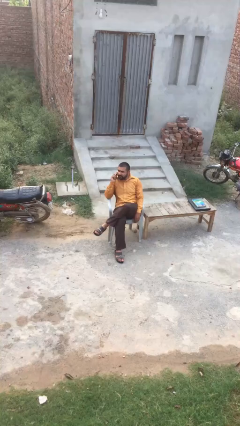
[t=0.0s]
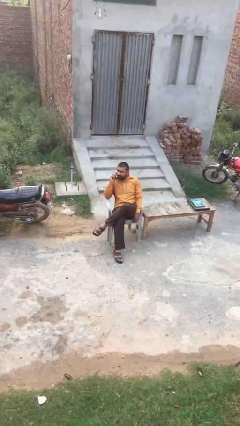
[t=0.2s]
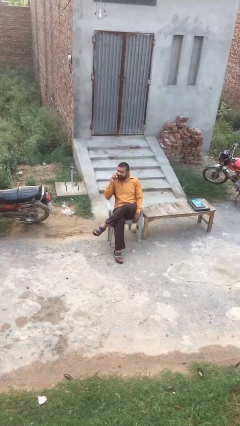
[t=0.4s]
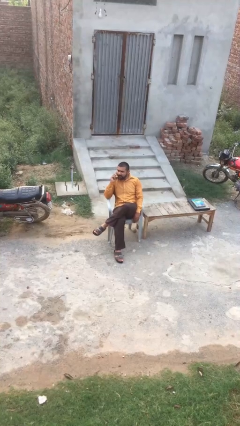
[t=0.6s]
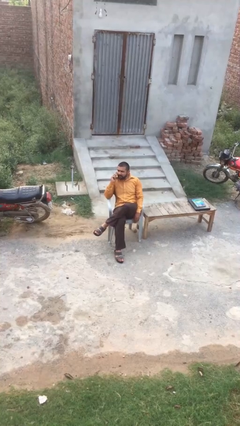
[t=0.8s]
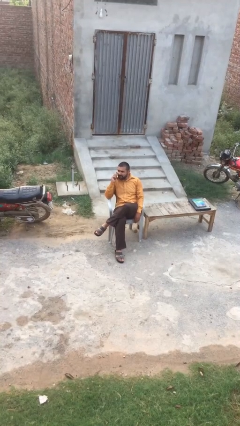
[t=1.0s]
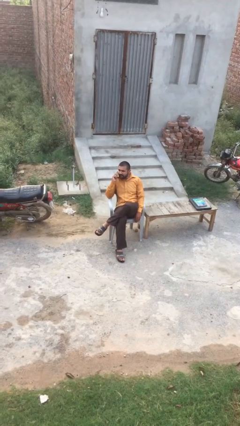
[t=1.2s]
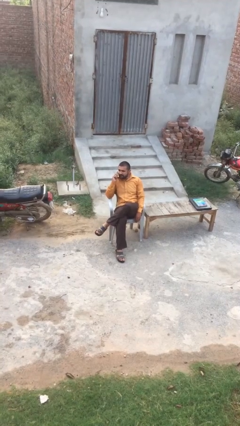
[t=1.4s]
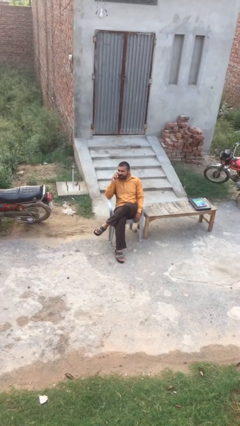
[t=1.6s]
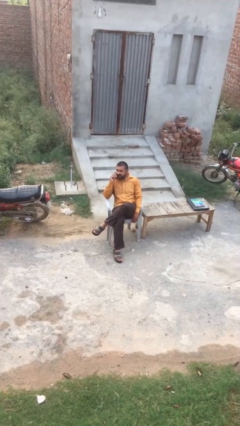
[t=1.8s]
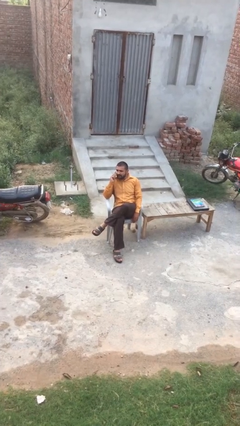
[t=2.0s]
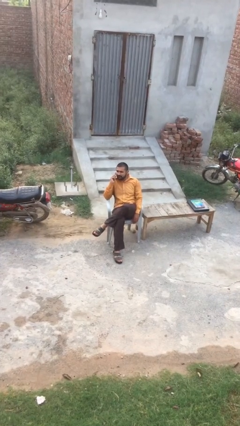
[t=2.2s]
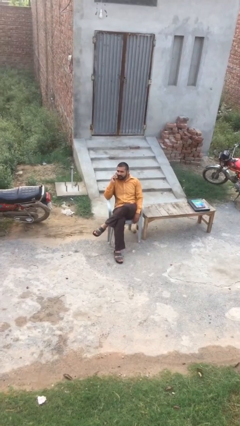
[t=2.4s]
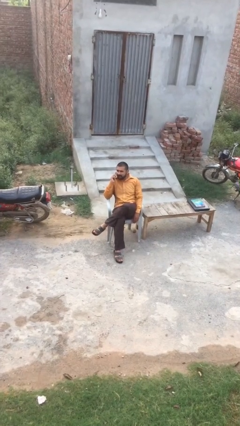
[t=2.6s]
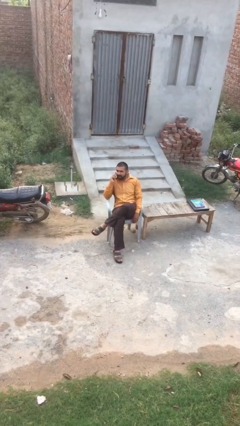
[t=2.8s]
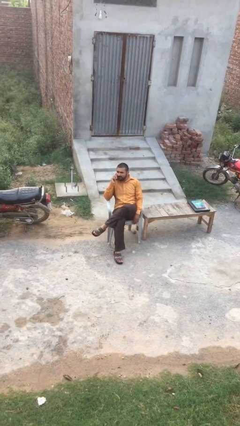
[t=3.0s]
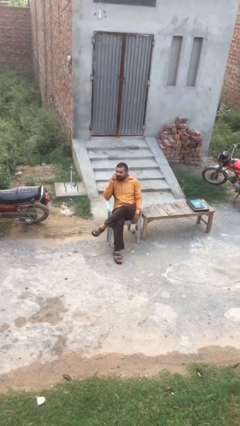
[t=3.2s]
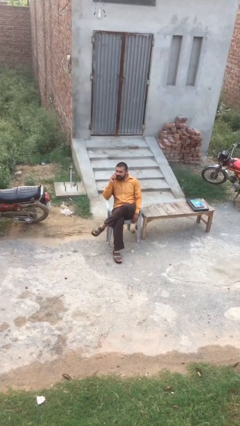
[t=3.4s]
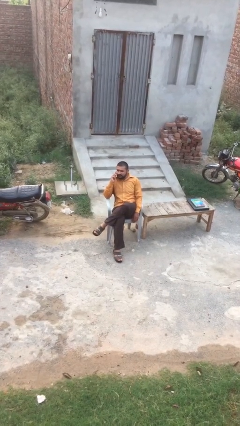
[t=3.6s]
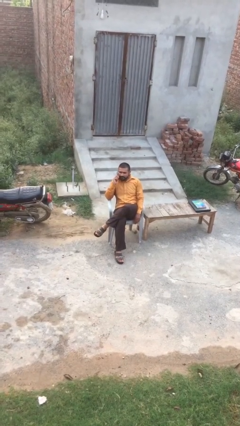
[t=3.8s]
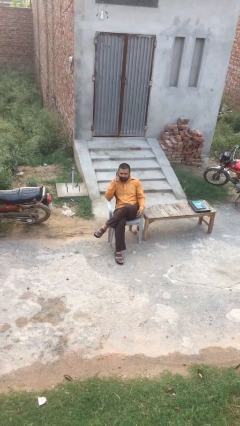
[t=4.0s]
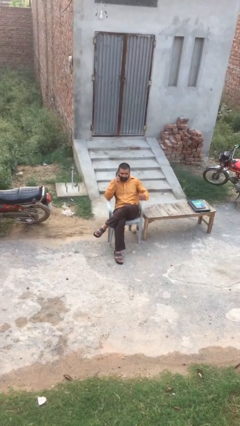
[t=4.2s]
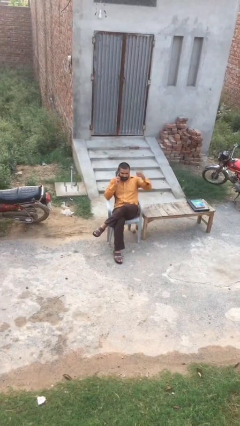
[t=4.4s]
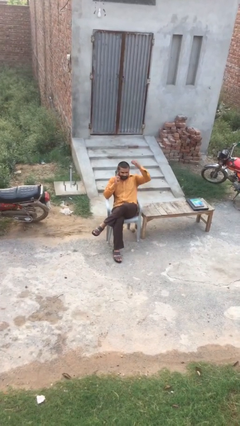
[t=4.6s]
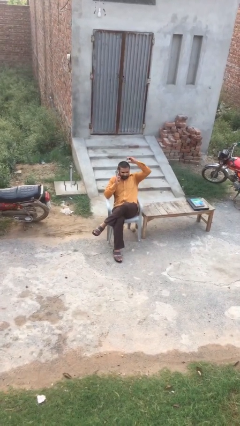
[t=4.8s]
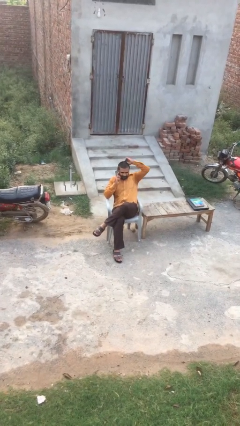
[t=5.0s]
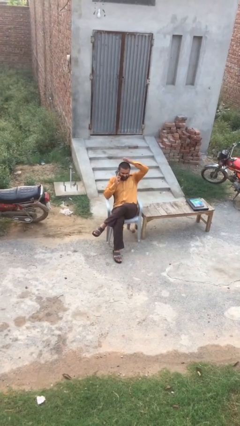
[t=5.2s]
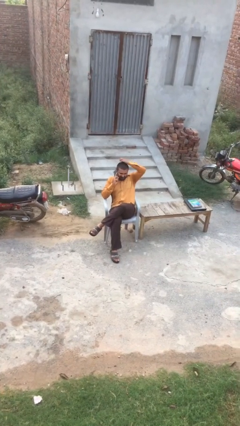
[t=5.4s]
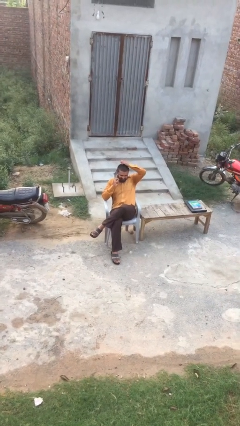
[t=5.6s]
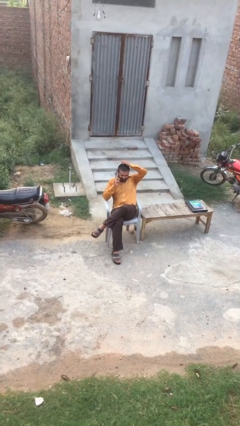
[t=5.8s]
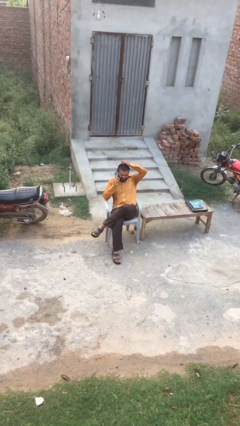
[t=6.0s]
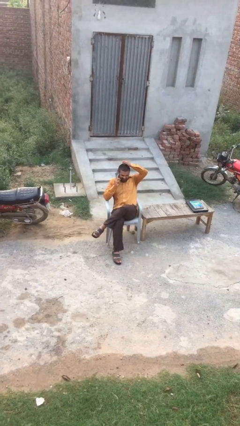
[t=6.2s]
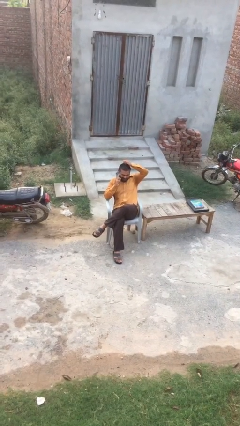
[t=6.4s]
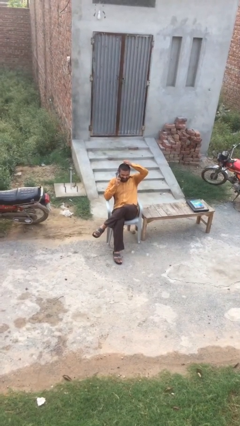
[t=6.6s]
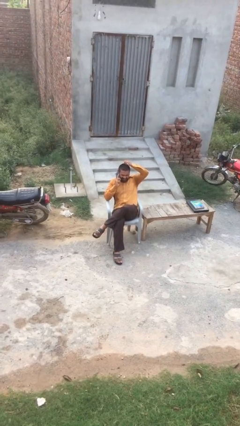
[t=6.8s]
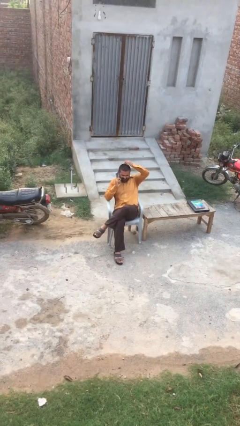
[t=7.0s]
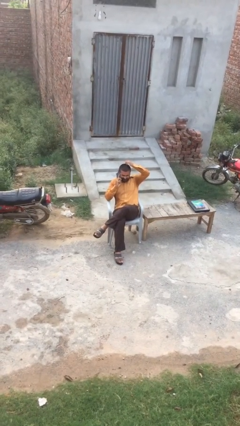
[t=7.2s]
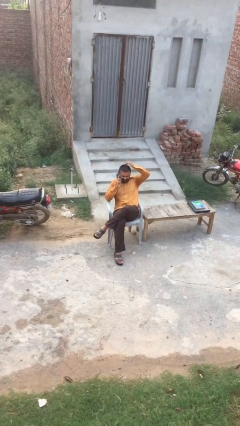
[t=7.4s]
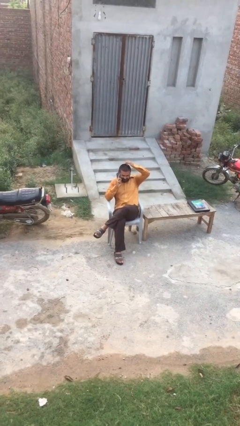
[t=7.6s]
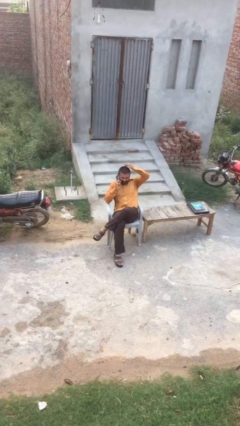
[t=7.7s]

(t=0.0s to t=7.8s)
person talks on phone

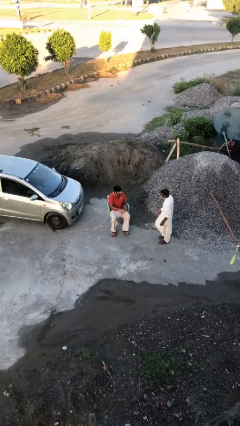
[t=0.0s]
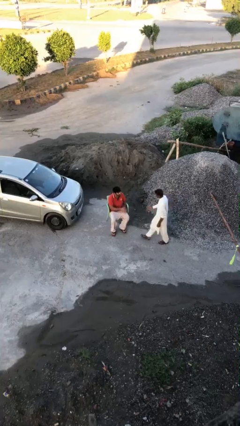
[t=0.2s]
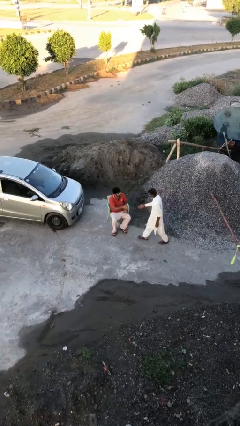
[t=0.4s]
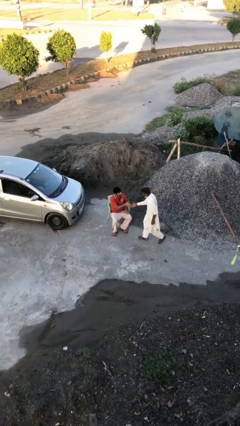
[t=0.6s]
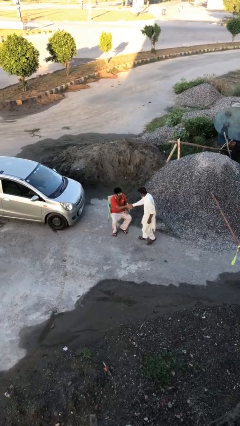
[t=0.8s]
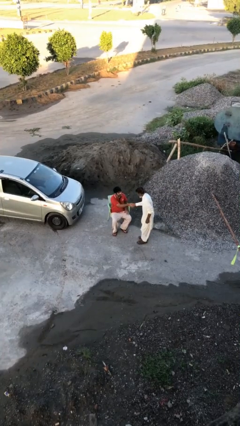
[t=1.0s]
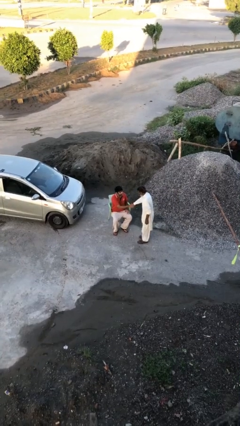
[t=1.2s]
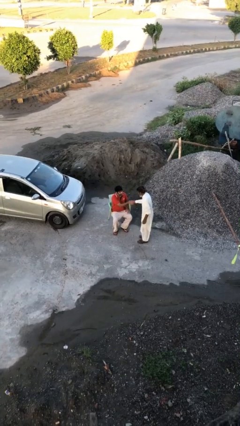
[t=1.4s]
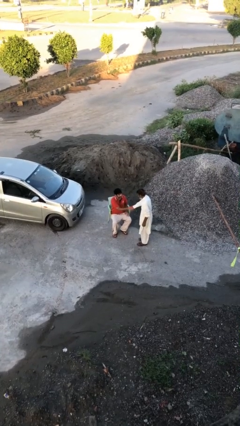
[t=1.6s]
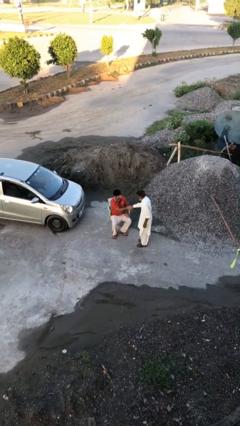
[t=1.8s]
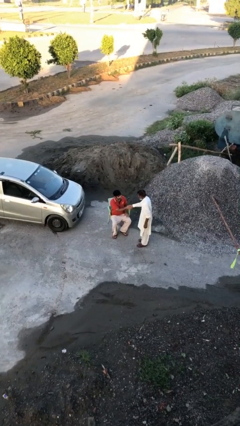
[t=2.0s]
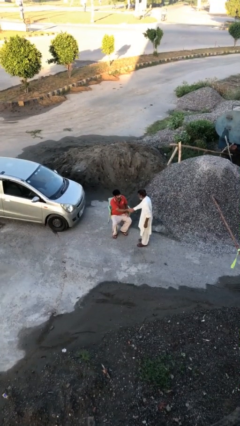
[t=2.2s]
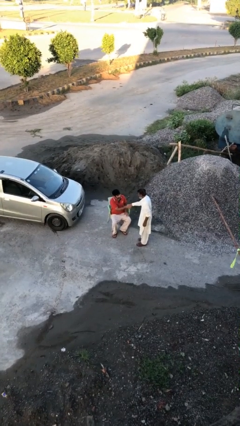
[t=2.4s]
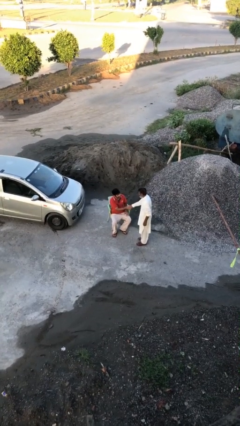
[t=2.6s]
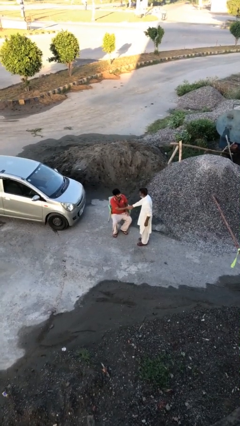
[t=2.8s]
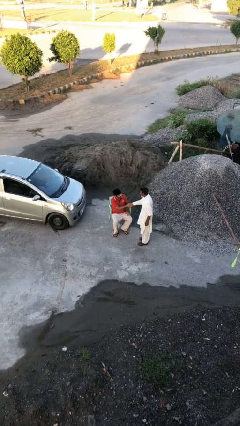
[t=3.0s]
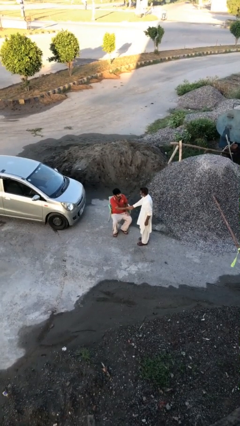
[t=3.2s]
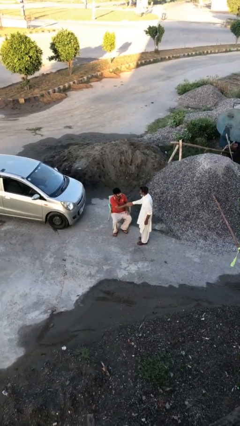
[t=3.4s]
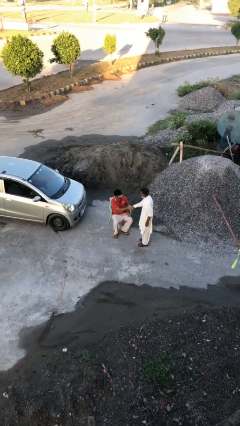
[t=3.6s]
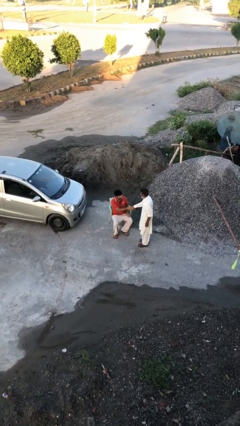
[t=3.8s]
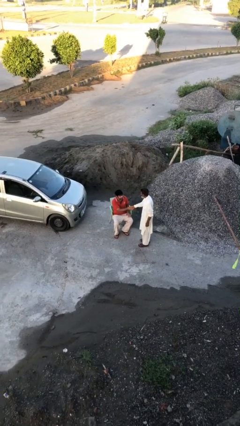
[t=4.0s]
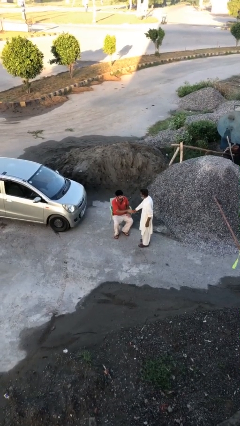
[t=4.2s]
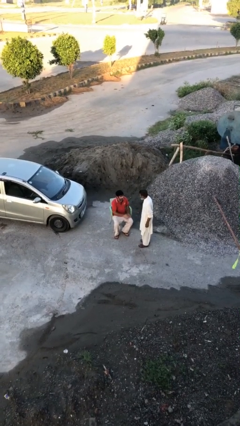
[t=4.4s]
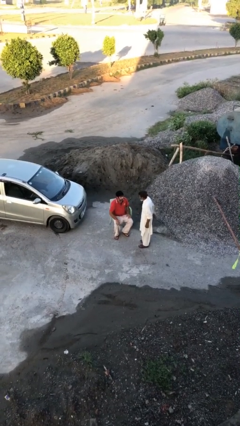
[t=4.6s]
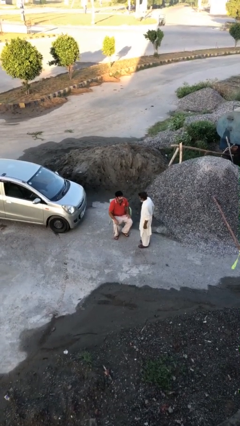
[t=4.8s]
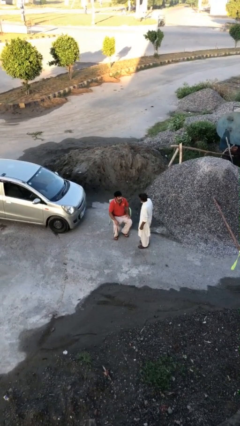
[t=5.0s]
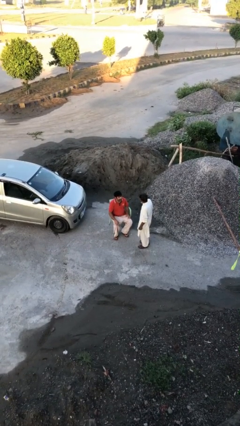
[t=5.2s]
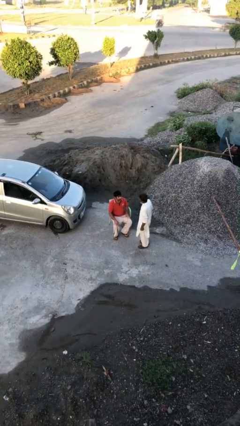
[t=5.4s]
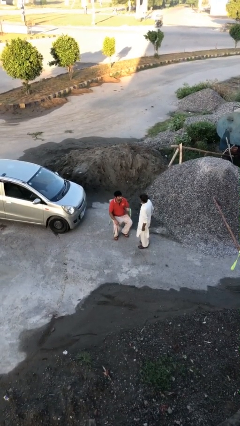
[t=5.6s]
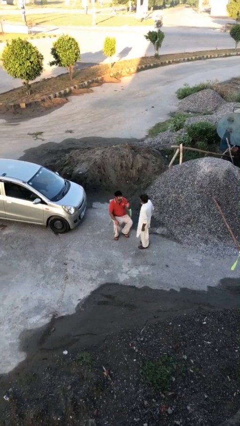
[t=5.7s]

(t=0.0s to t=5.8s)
person shakes hand

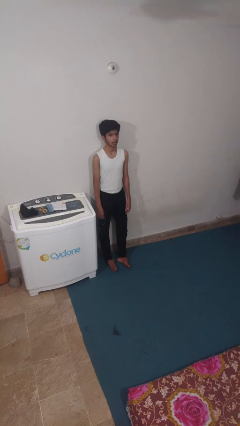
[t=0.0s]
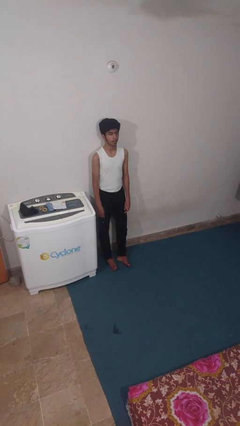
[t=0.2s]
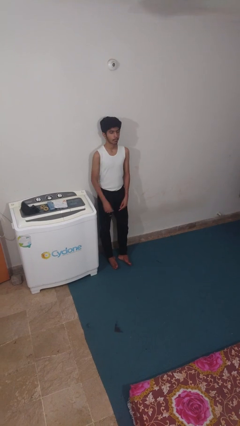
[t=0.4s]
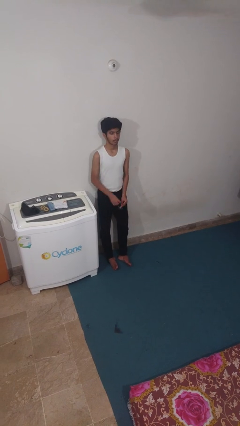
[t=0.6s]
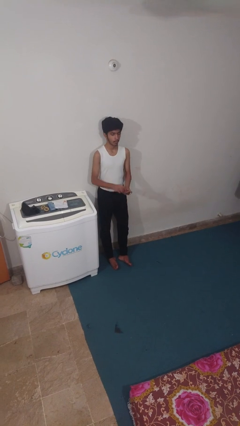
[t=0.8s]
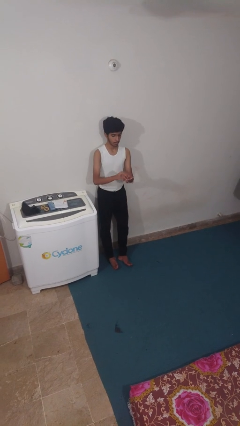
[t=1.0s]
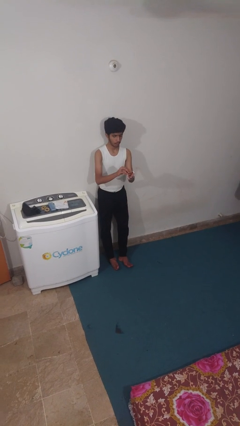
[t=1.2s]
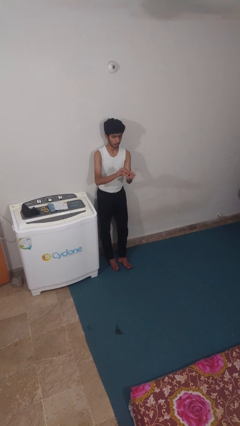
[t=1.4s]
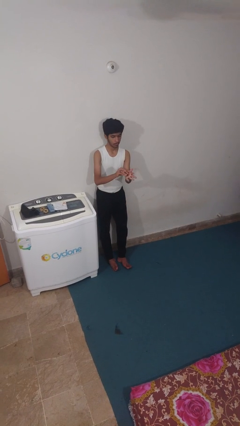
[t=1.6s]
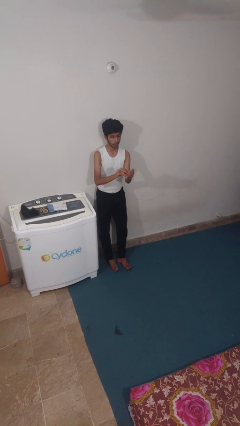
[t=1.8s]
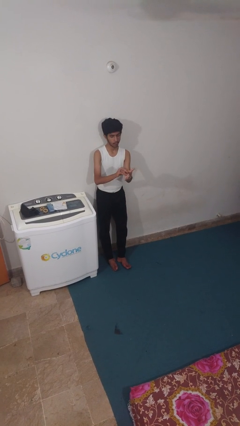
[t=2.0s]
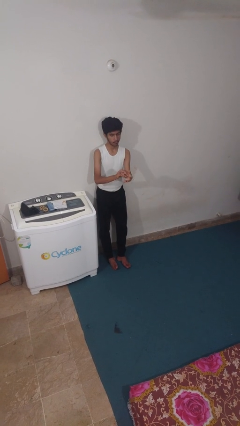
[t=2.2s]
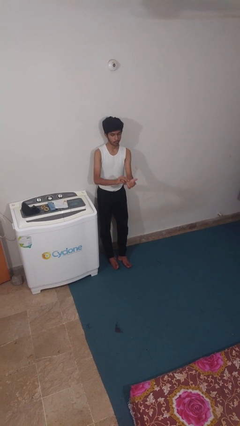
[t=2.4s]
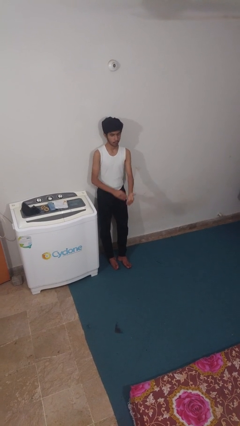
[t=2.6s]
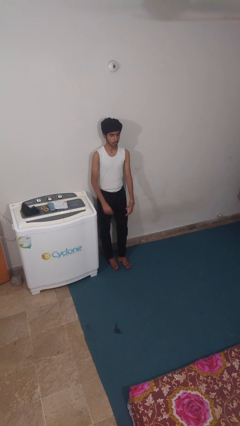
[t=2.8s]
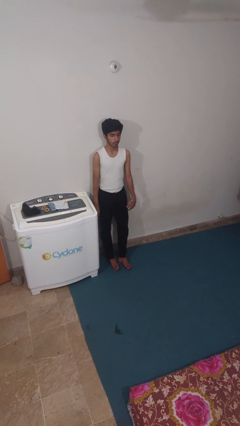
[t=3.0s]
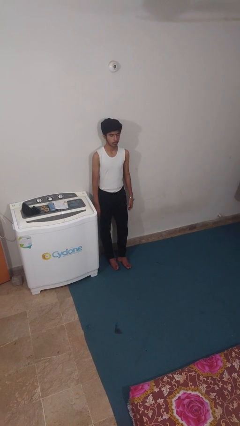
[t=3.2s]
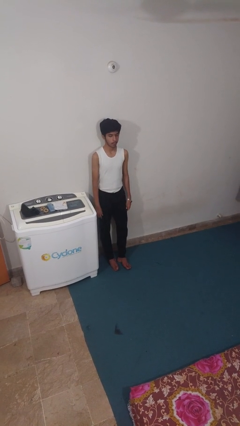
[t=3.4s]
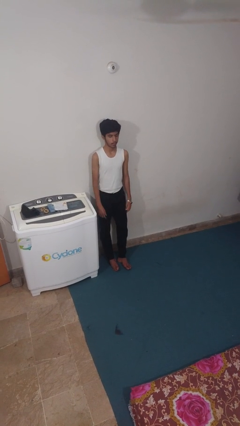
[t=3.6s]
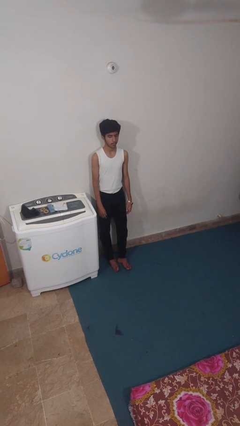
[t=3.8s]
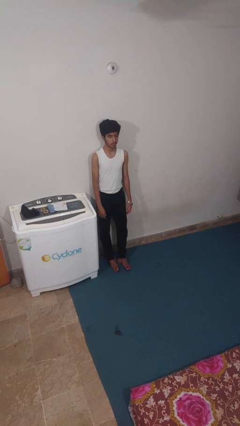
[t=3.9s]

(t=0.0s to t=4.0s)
person puts on wristwatch

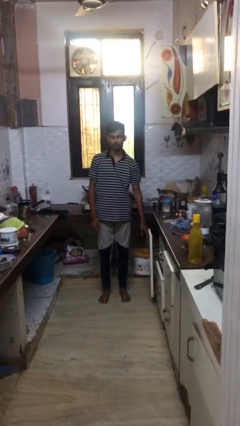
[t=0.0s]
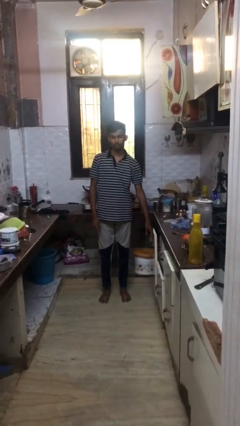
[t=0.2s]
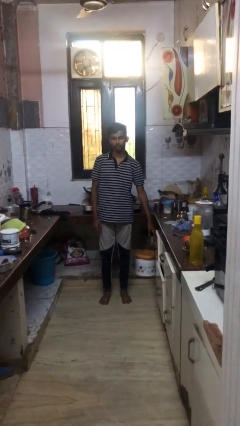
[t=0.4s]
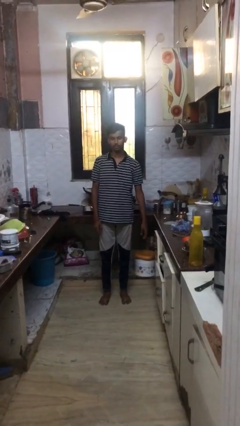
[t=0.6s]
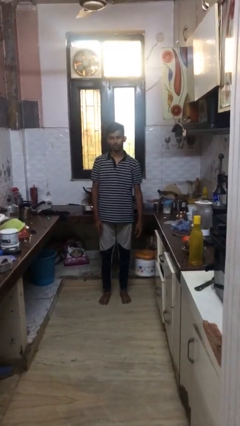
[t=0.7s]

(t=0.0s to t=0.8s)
person closes dishwasher
